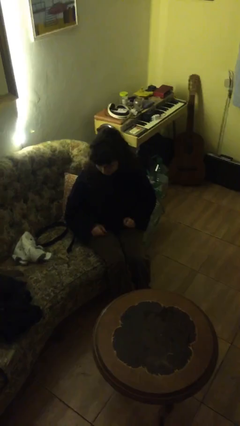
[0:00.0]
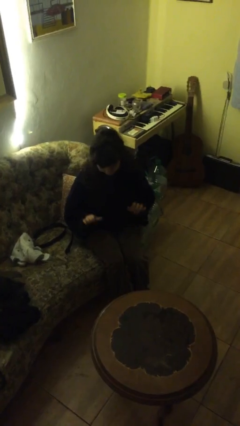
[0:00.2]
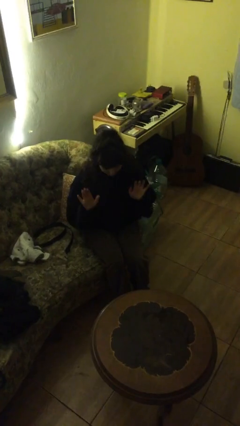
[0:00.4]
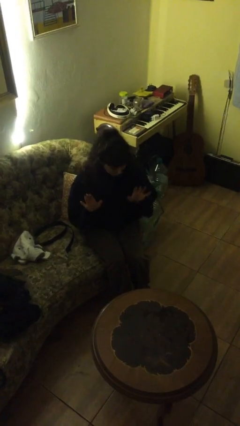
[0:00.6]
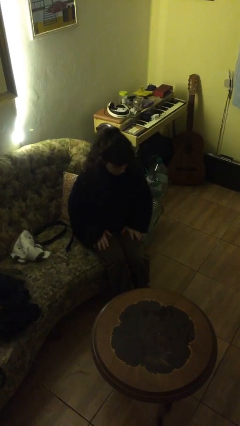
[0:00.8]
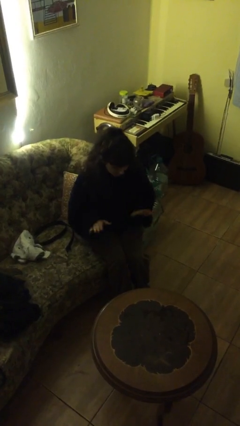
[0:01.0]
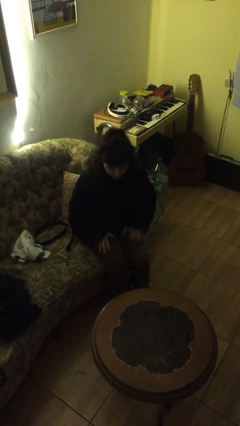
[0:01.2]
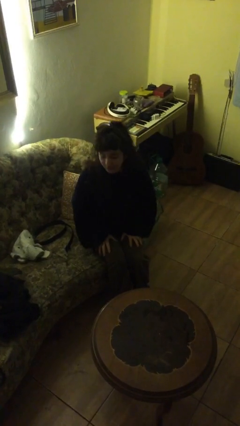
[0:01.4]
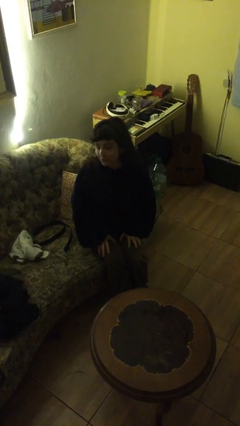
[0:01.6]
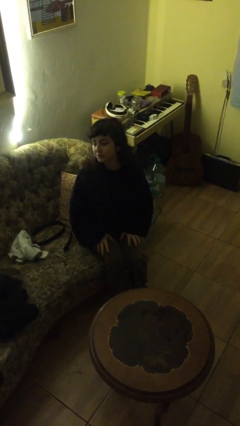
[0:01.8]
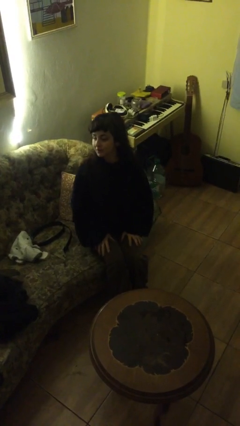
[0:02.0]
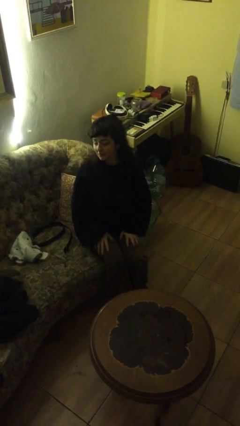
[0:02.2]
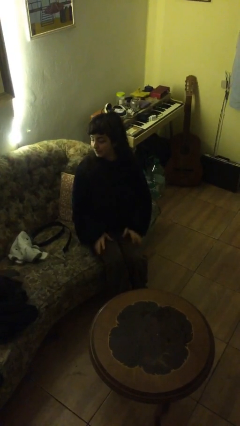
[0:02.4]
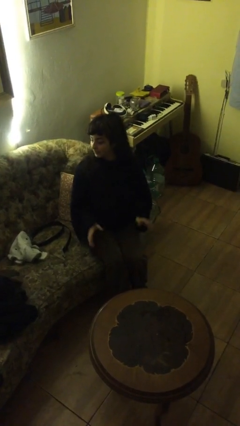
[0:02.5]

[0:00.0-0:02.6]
person slaps hands on thighs

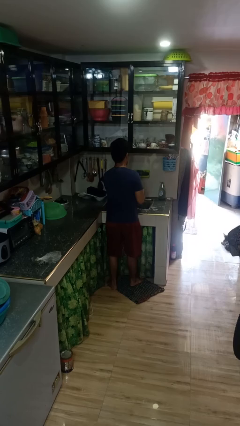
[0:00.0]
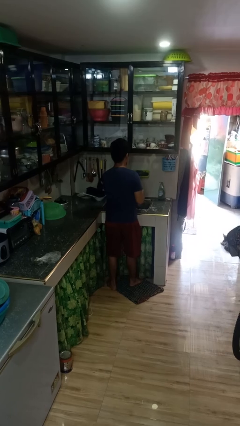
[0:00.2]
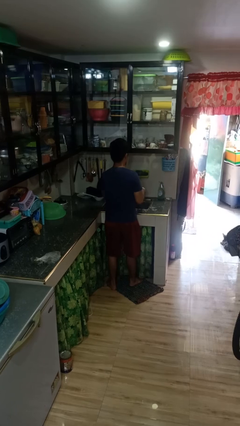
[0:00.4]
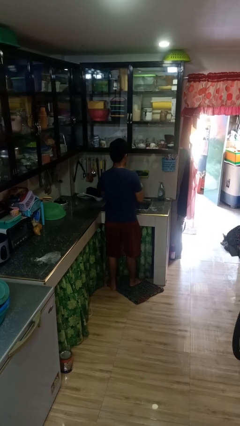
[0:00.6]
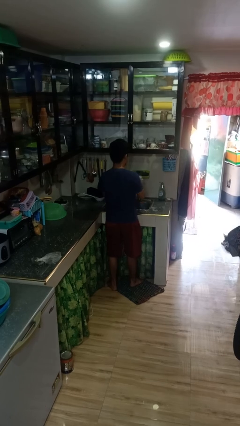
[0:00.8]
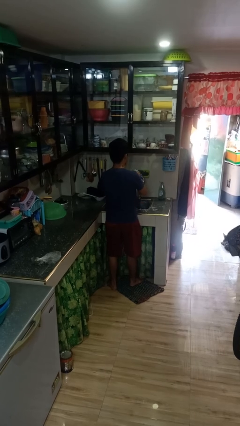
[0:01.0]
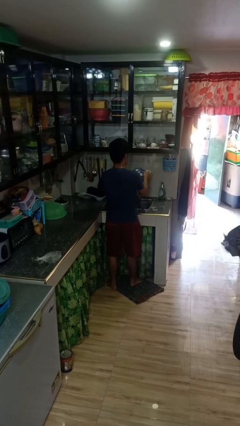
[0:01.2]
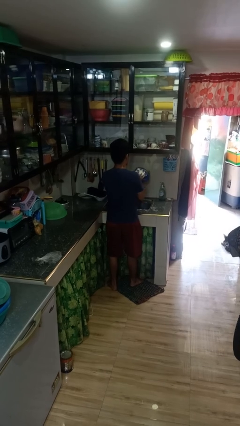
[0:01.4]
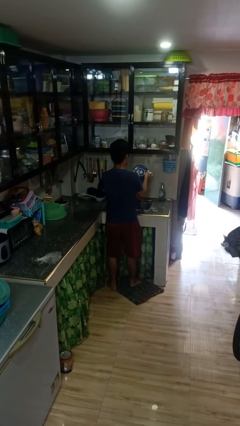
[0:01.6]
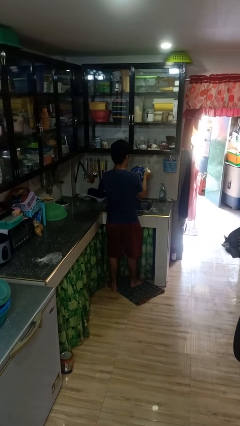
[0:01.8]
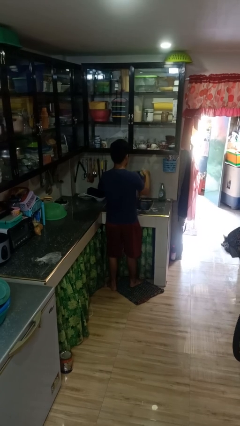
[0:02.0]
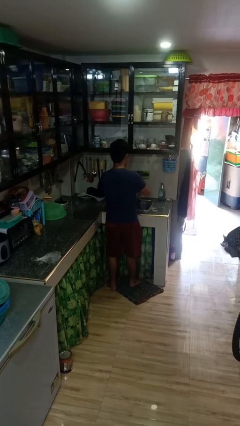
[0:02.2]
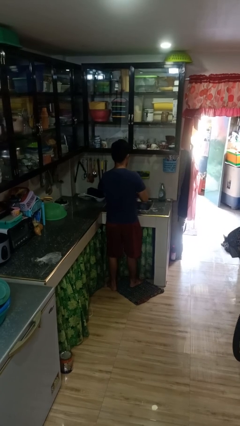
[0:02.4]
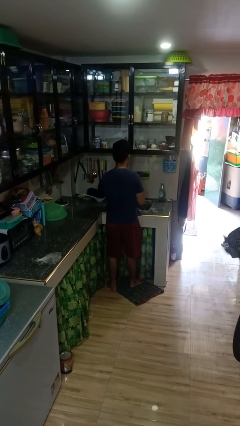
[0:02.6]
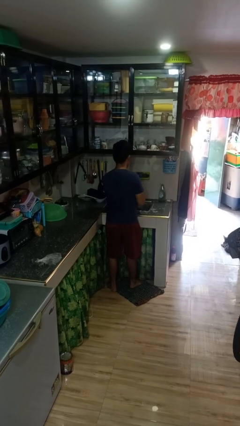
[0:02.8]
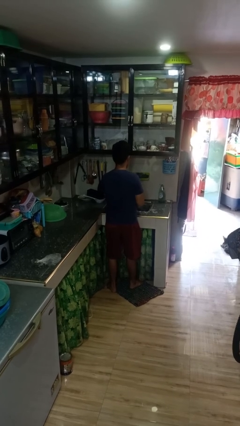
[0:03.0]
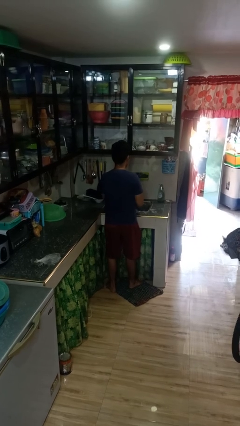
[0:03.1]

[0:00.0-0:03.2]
person washes dish

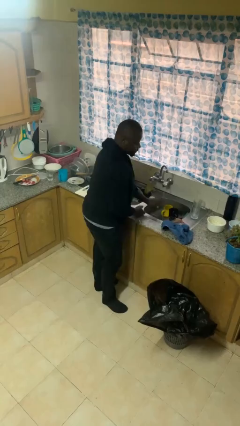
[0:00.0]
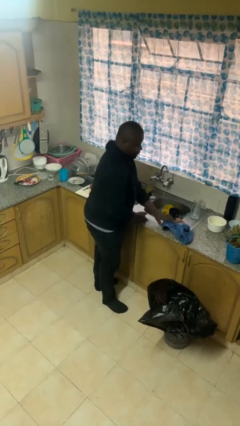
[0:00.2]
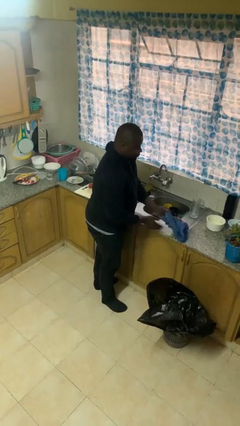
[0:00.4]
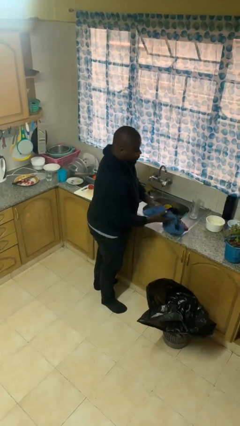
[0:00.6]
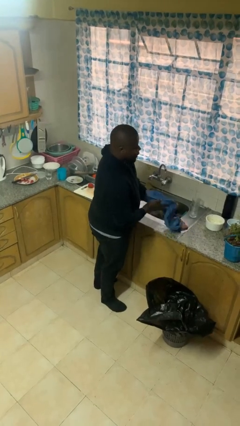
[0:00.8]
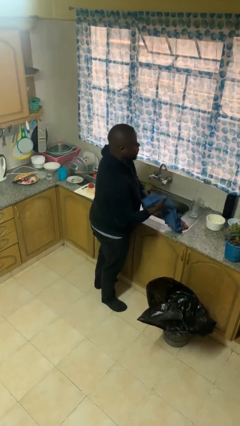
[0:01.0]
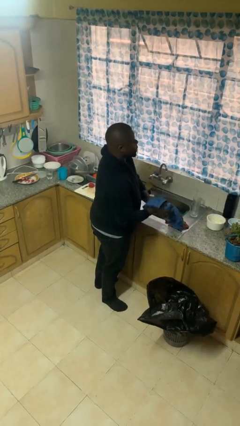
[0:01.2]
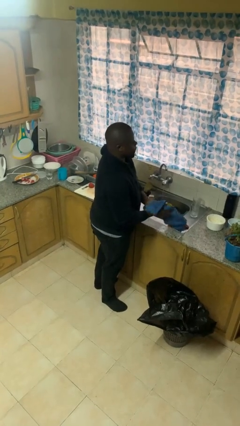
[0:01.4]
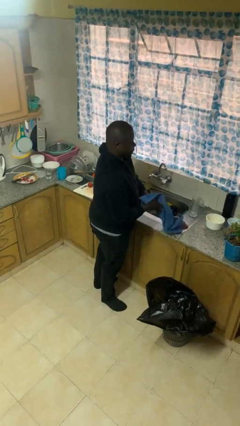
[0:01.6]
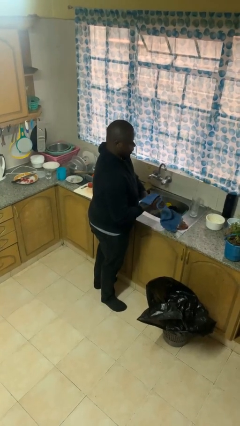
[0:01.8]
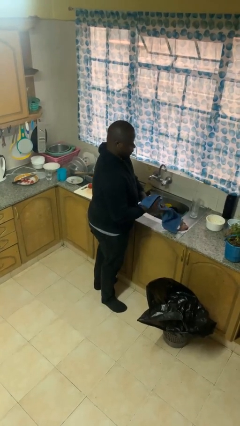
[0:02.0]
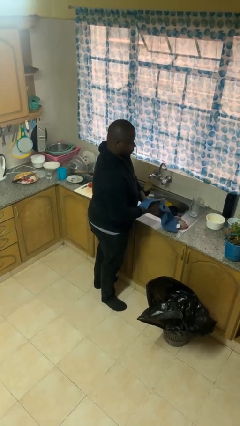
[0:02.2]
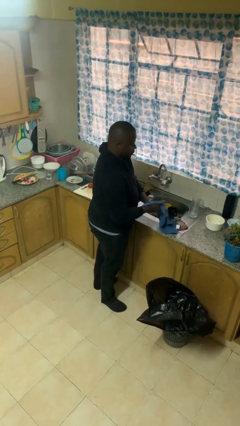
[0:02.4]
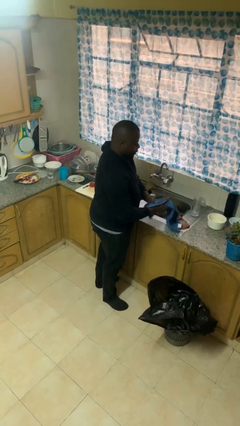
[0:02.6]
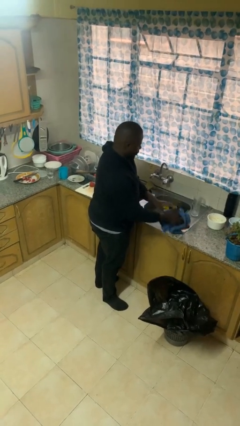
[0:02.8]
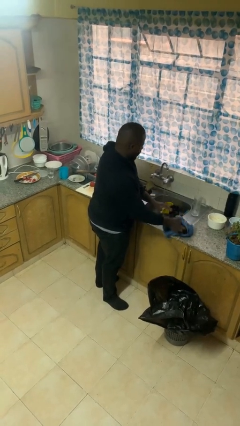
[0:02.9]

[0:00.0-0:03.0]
person dries hands with towel

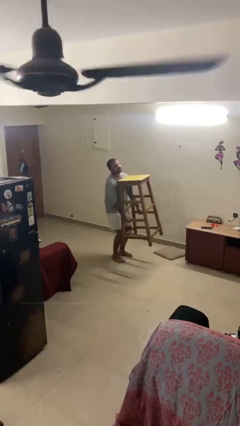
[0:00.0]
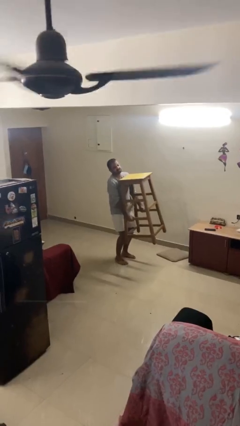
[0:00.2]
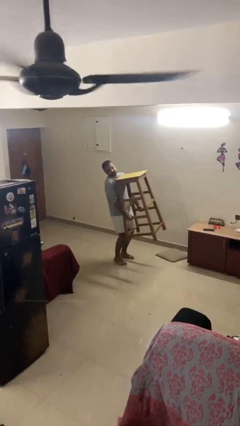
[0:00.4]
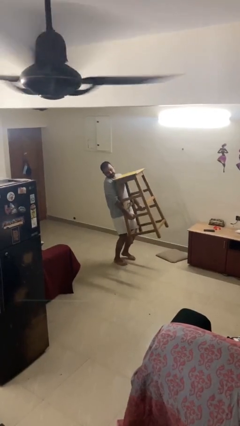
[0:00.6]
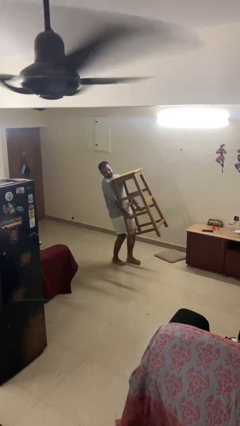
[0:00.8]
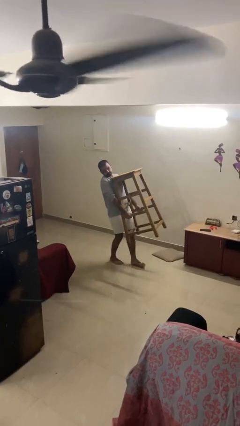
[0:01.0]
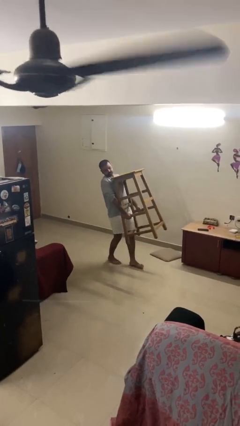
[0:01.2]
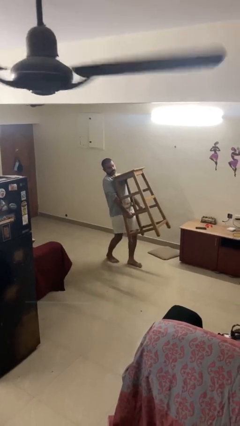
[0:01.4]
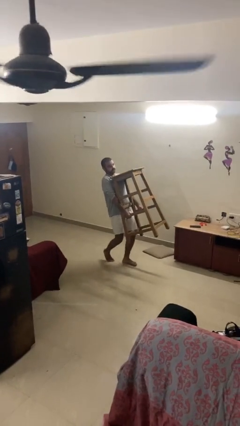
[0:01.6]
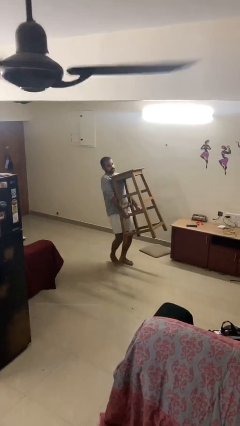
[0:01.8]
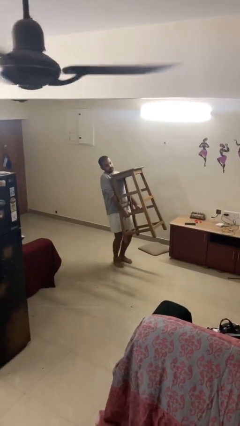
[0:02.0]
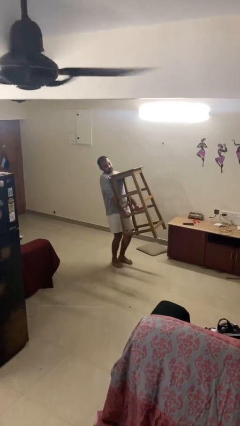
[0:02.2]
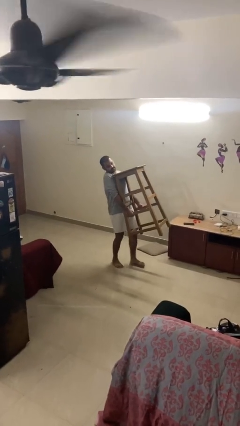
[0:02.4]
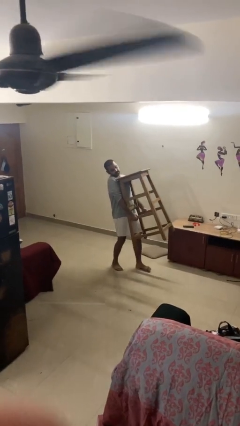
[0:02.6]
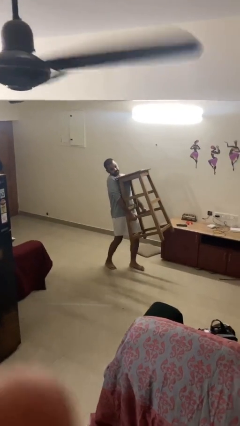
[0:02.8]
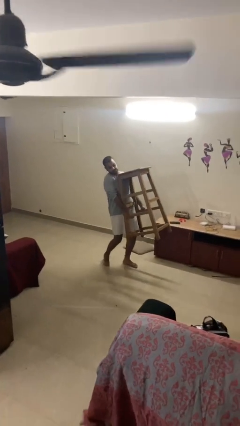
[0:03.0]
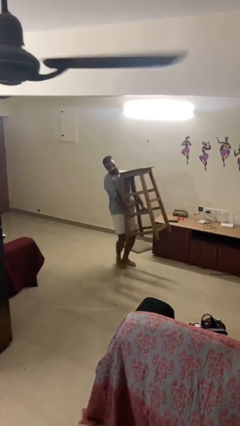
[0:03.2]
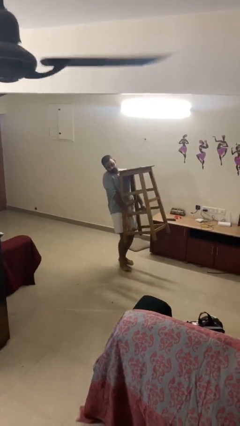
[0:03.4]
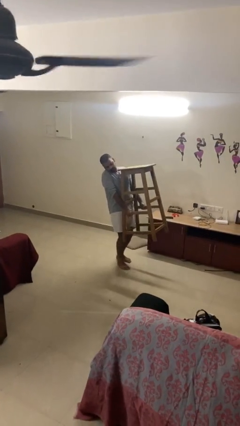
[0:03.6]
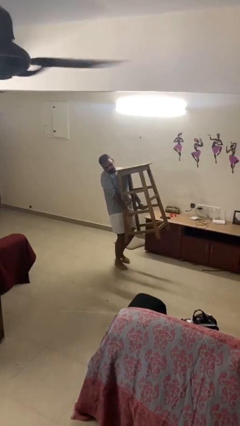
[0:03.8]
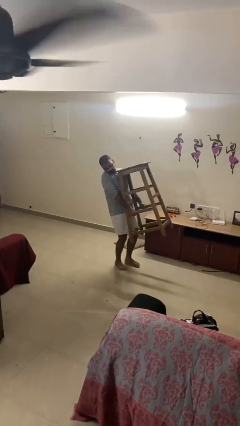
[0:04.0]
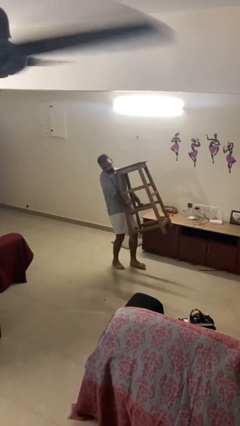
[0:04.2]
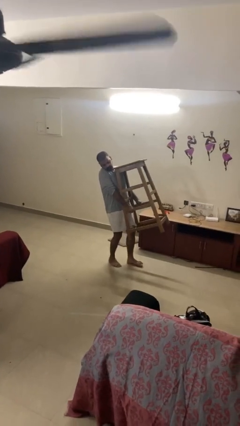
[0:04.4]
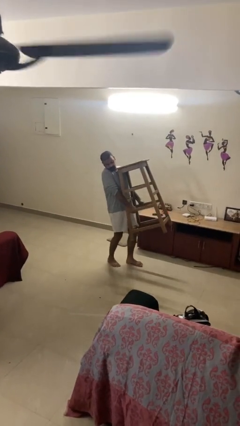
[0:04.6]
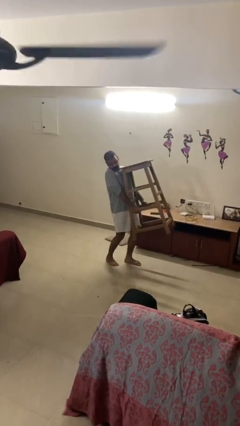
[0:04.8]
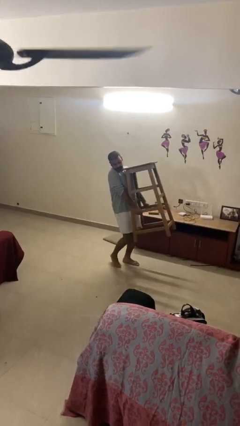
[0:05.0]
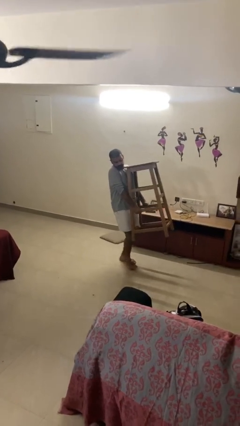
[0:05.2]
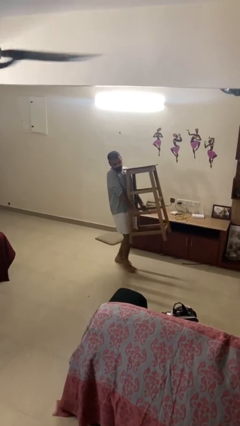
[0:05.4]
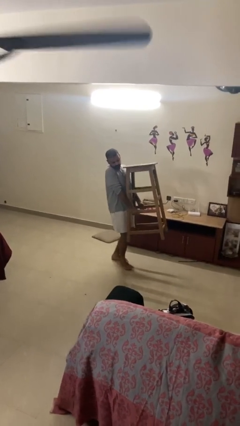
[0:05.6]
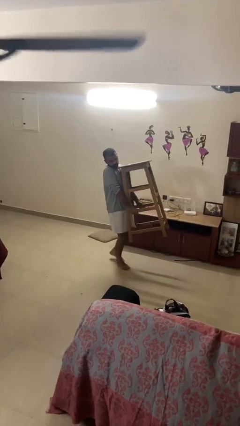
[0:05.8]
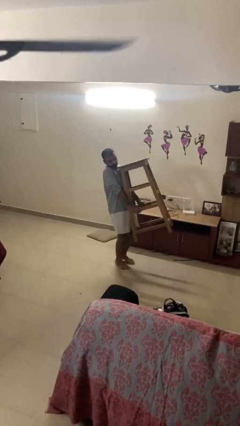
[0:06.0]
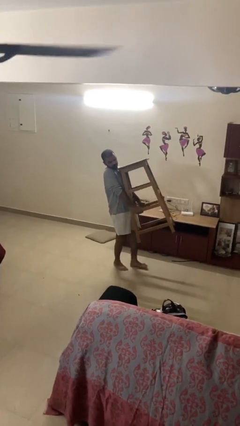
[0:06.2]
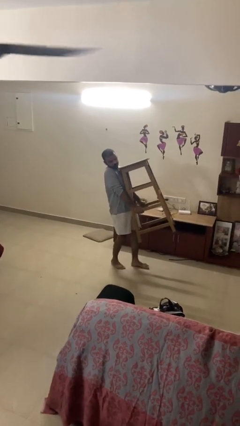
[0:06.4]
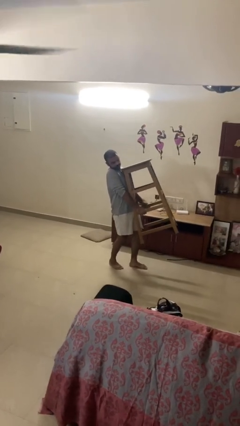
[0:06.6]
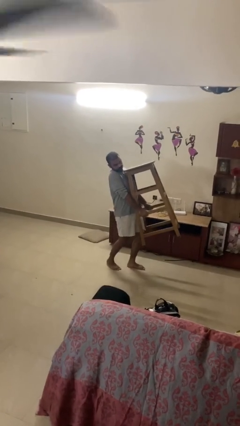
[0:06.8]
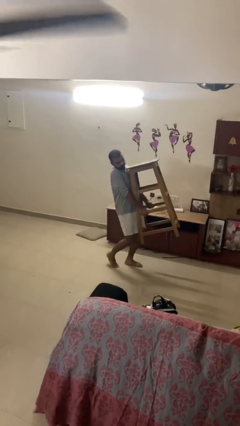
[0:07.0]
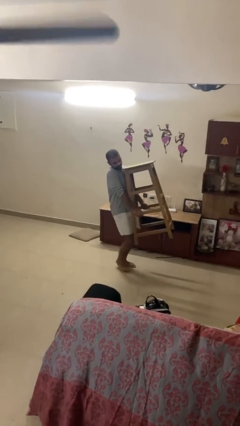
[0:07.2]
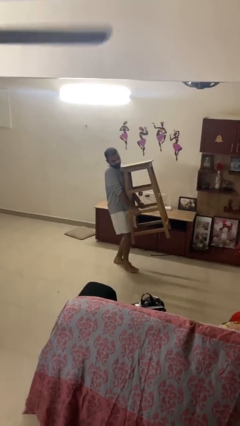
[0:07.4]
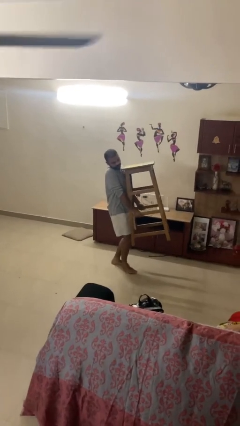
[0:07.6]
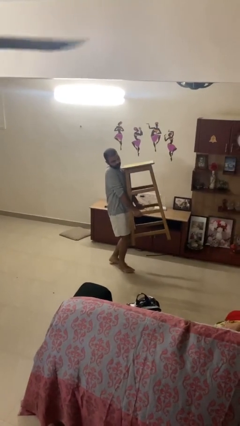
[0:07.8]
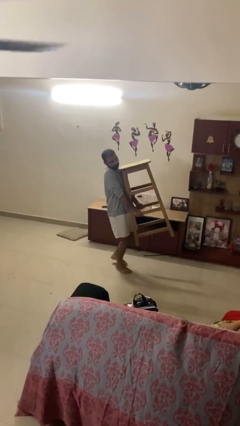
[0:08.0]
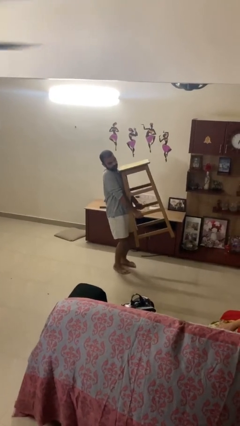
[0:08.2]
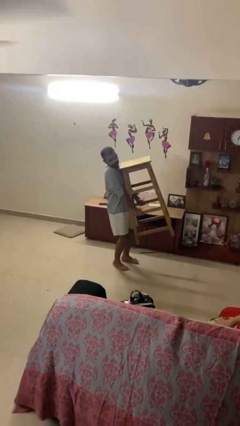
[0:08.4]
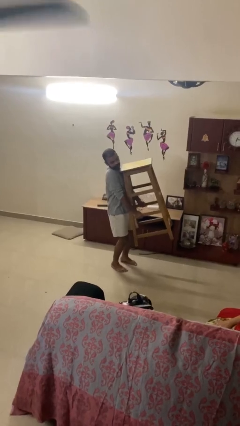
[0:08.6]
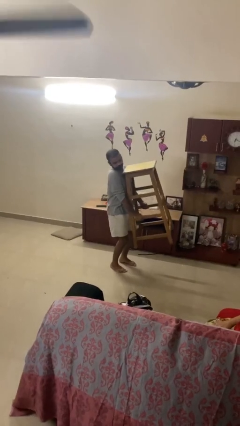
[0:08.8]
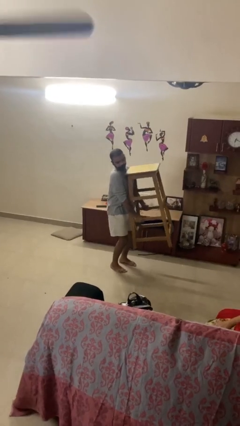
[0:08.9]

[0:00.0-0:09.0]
person carries heavy object

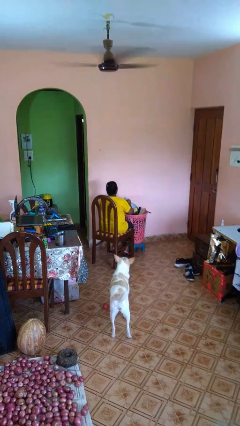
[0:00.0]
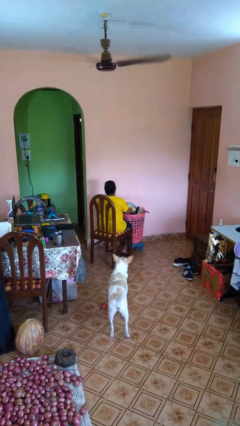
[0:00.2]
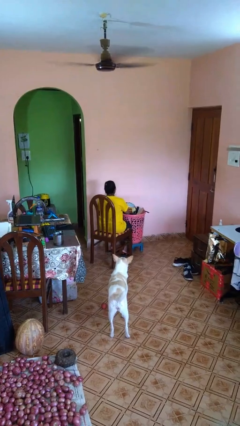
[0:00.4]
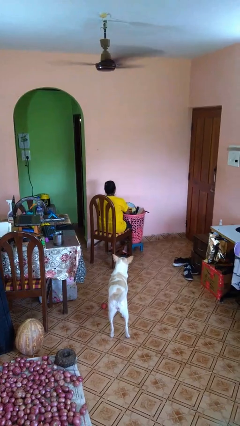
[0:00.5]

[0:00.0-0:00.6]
person puts object into basket
